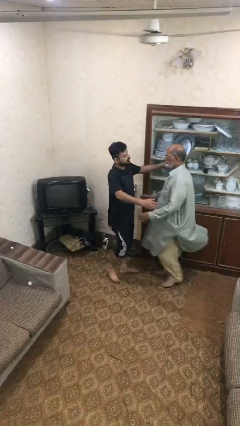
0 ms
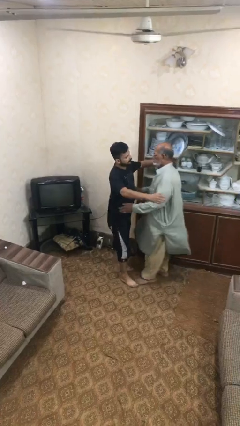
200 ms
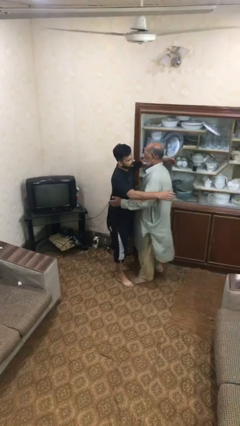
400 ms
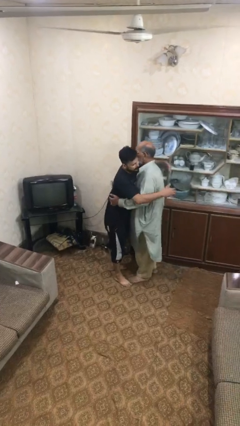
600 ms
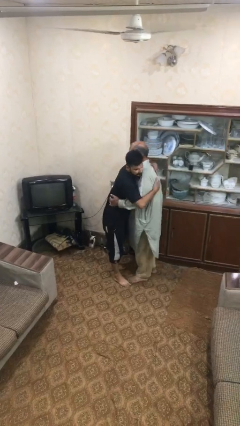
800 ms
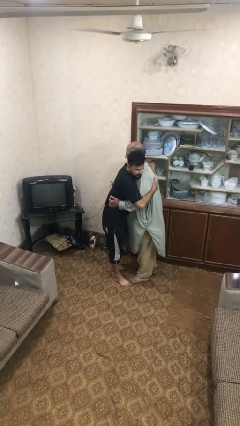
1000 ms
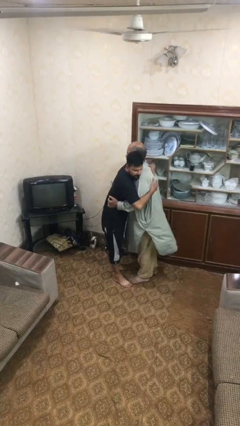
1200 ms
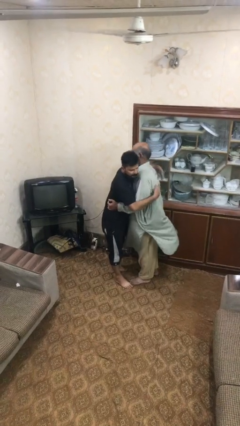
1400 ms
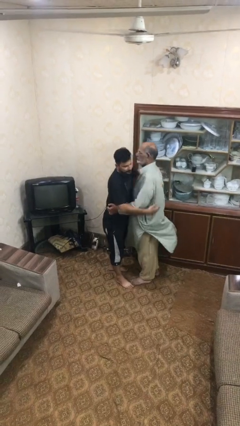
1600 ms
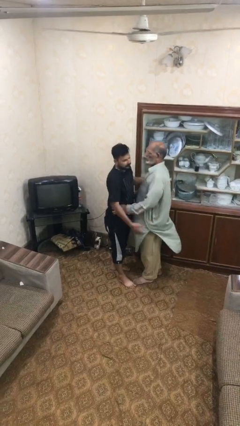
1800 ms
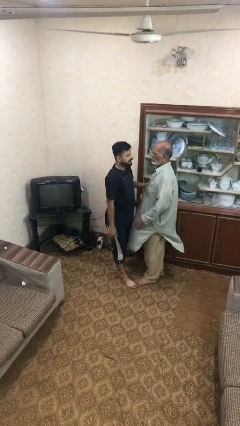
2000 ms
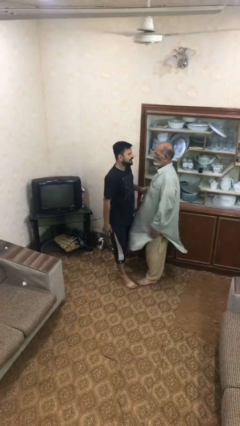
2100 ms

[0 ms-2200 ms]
person embraces person

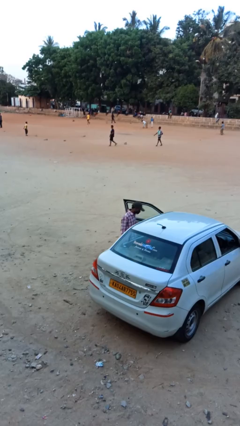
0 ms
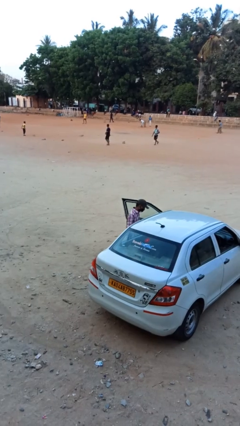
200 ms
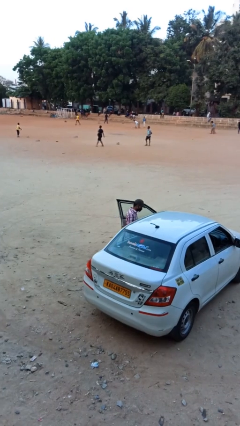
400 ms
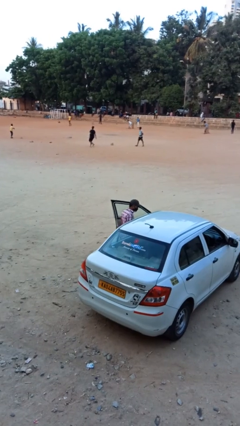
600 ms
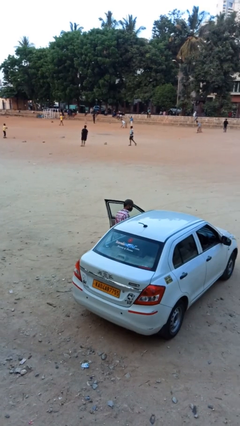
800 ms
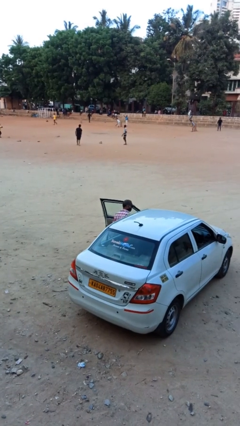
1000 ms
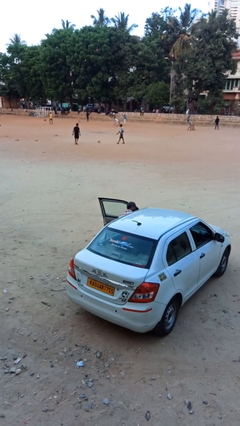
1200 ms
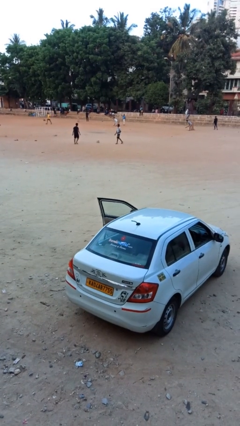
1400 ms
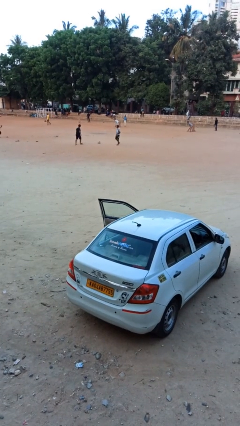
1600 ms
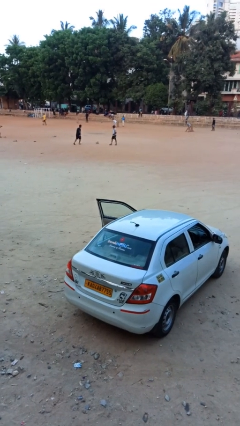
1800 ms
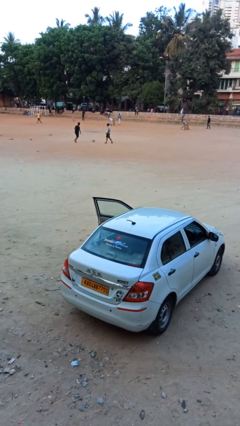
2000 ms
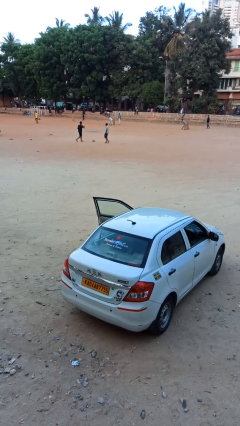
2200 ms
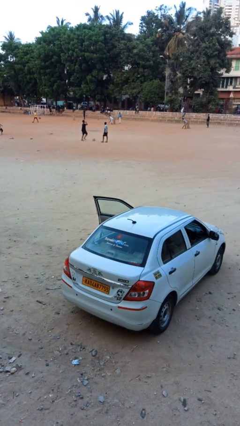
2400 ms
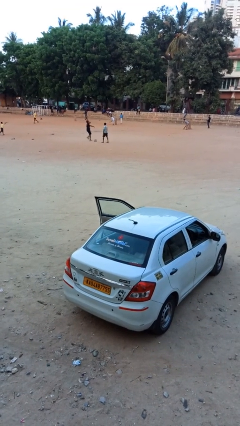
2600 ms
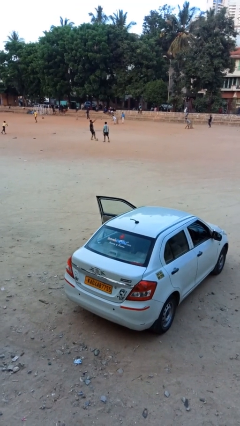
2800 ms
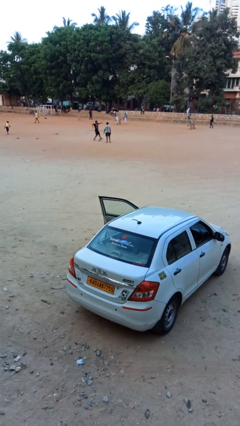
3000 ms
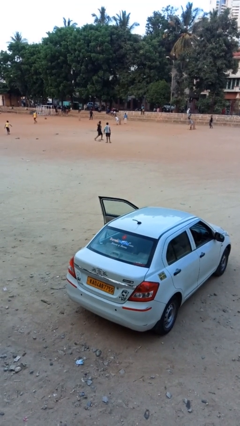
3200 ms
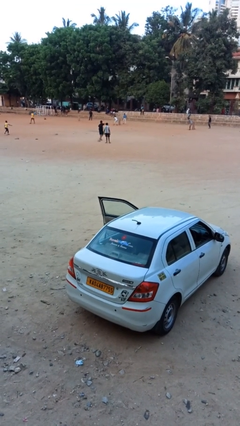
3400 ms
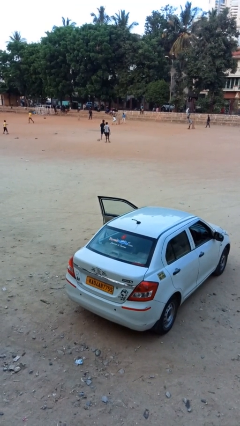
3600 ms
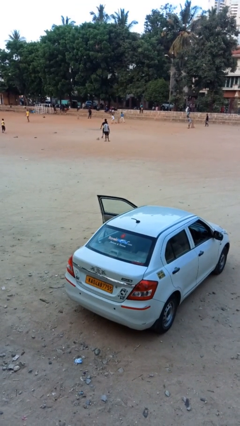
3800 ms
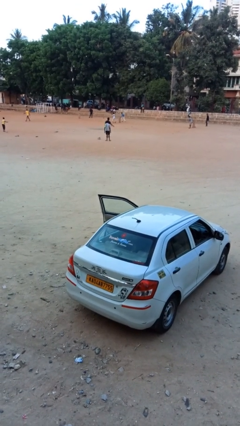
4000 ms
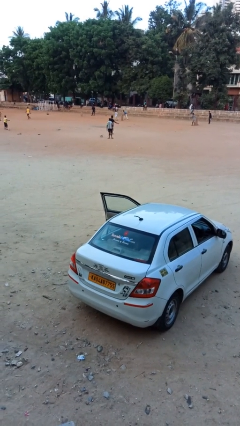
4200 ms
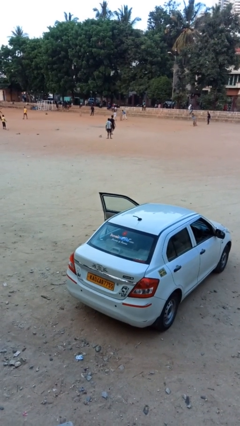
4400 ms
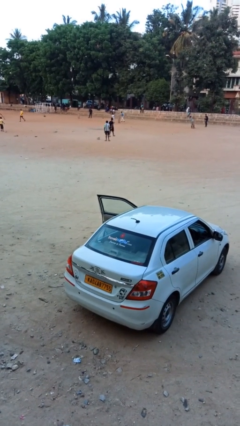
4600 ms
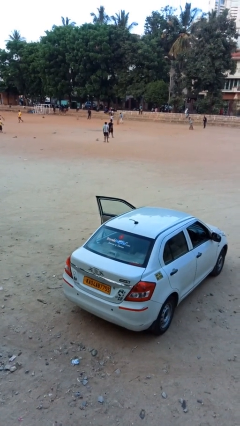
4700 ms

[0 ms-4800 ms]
person enters car

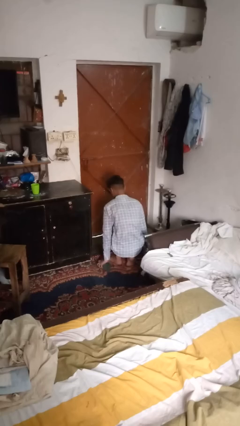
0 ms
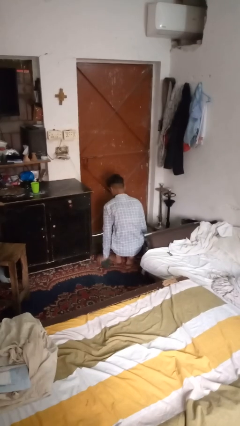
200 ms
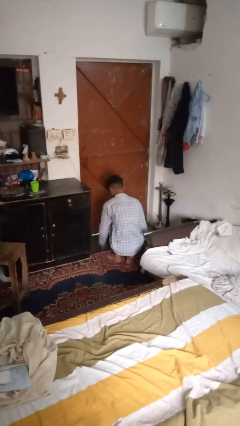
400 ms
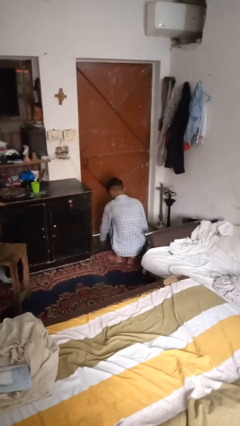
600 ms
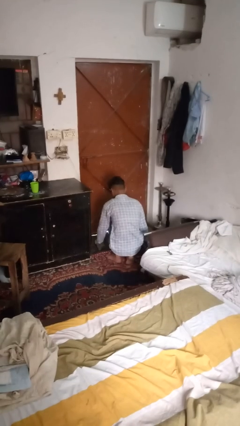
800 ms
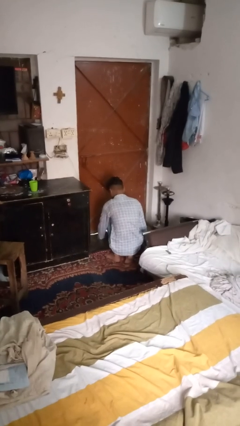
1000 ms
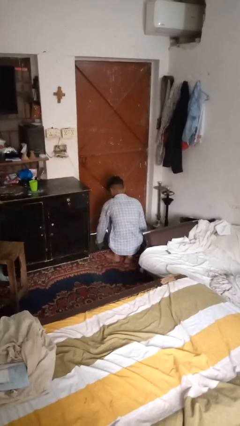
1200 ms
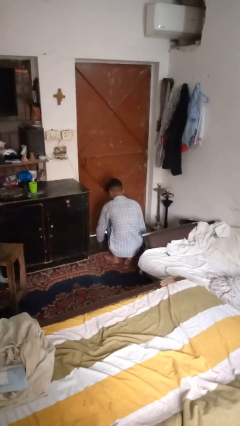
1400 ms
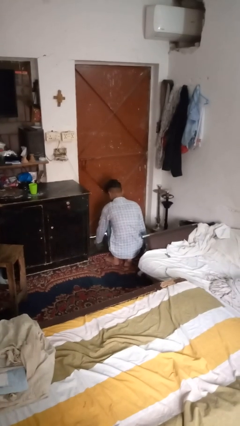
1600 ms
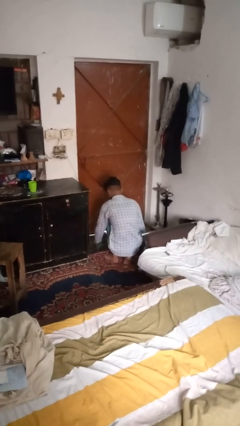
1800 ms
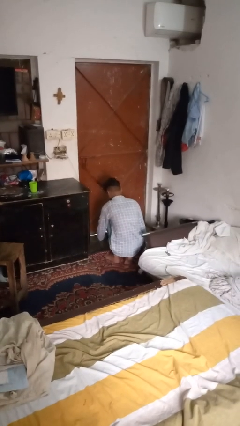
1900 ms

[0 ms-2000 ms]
person mops

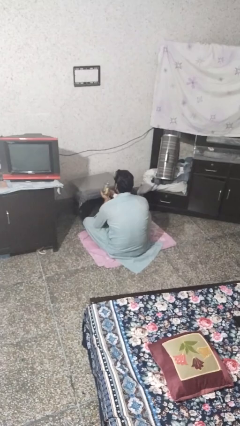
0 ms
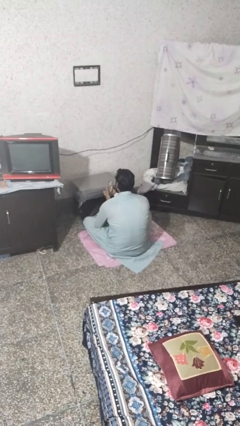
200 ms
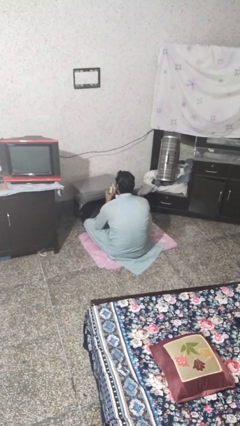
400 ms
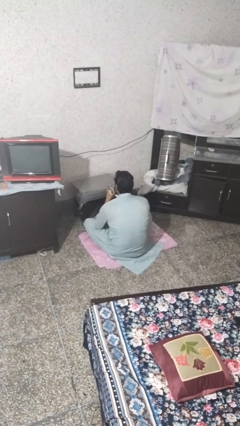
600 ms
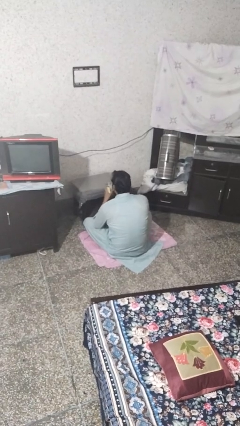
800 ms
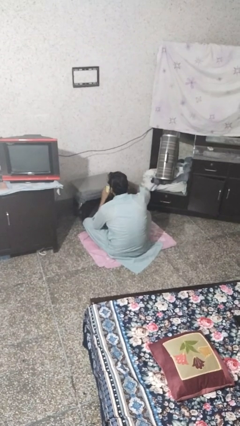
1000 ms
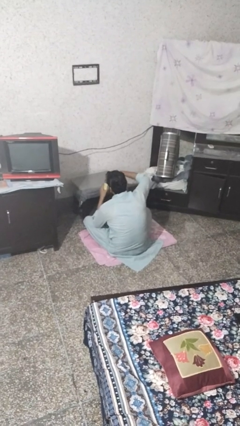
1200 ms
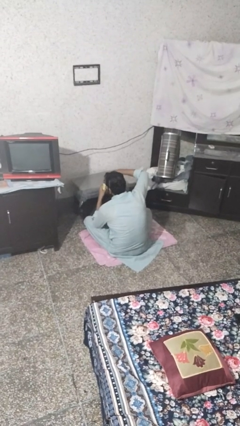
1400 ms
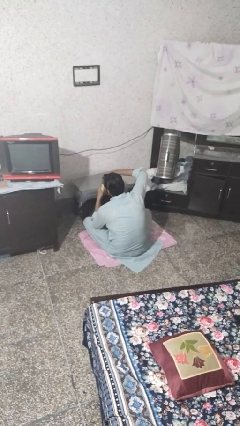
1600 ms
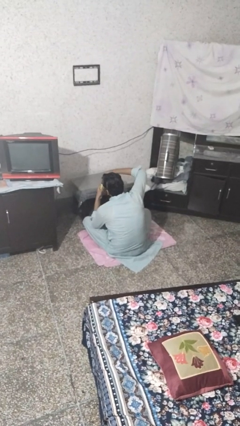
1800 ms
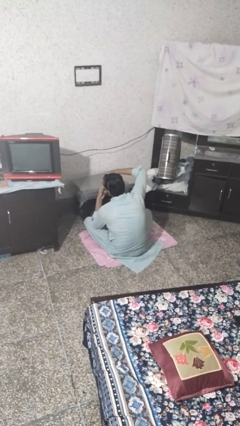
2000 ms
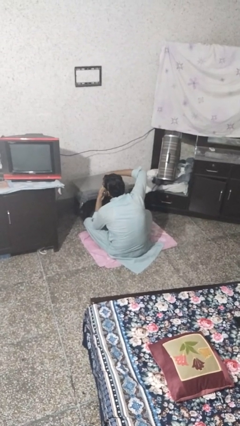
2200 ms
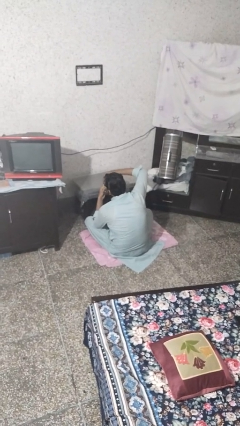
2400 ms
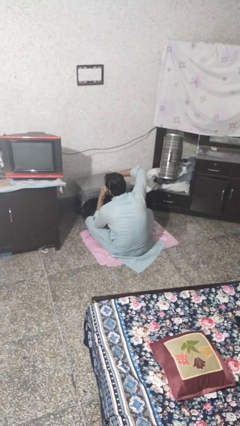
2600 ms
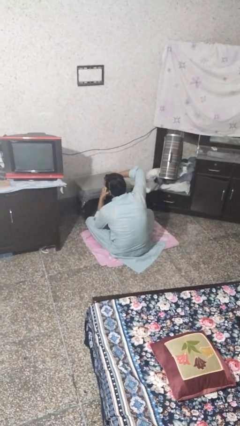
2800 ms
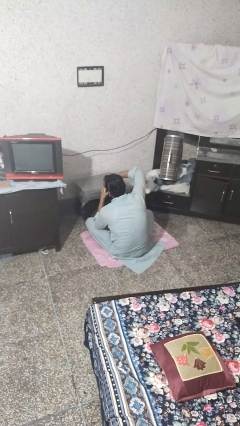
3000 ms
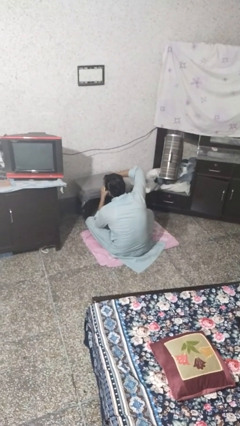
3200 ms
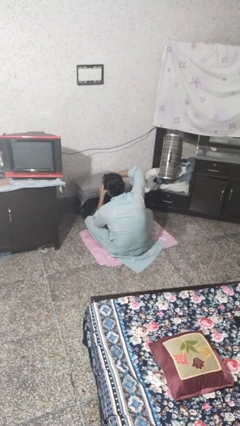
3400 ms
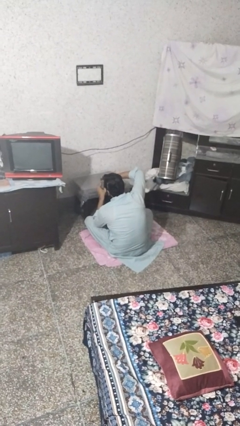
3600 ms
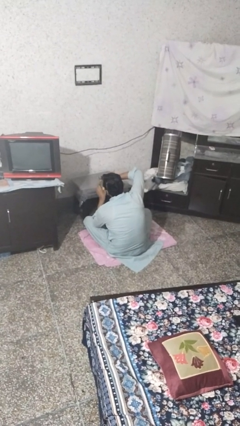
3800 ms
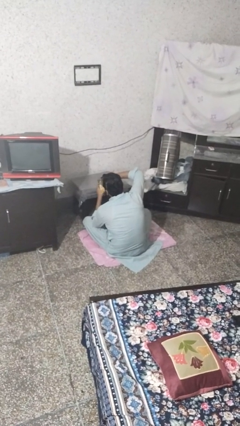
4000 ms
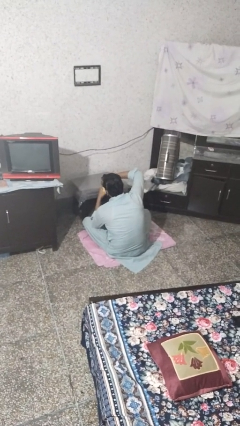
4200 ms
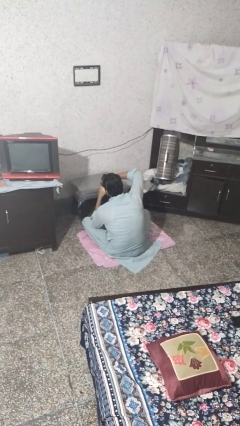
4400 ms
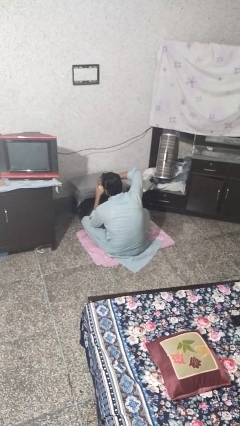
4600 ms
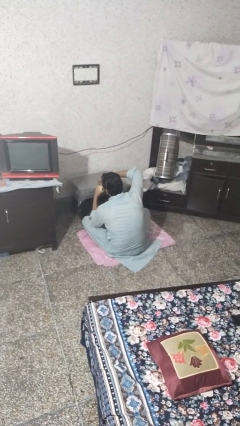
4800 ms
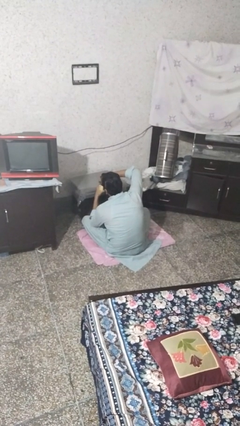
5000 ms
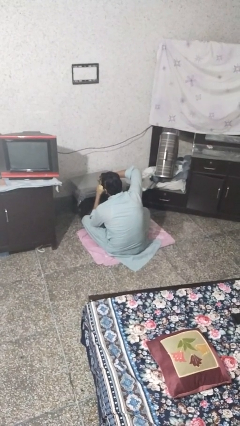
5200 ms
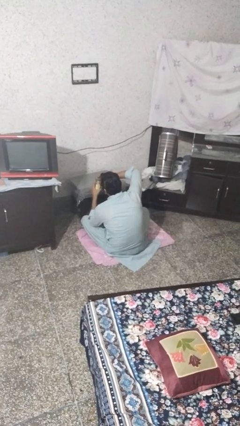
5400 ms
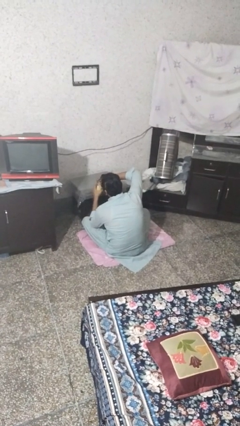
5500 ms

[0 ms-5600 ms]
person closes jar

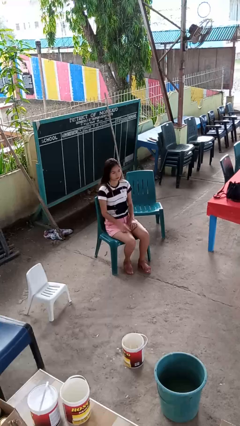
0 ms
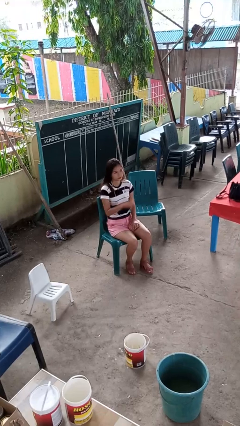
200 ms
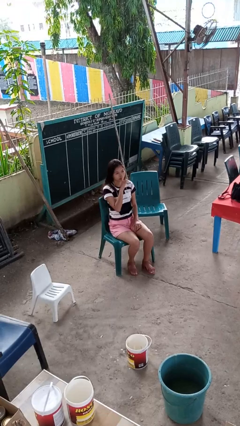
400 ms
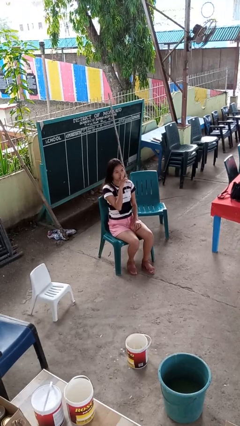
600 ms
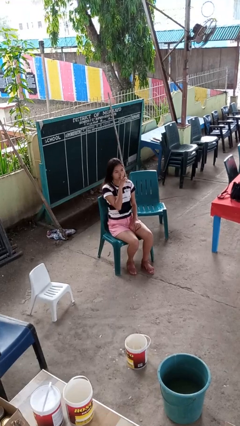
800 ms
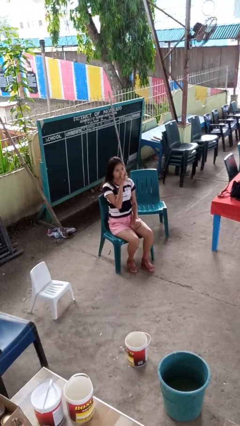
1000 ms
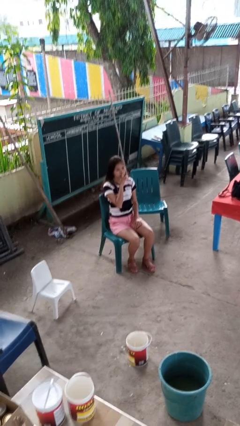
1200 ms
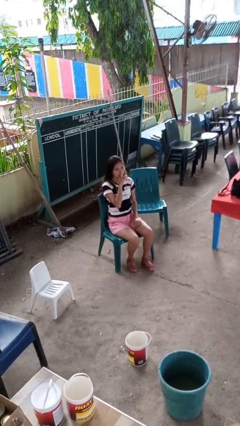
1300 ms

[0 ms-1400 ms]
person gestures be quiet

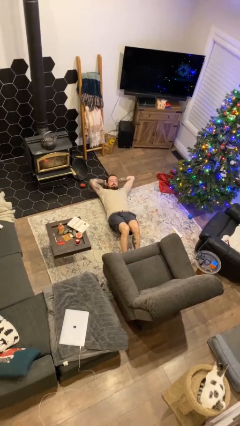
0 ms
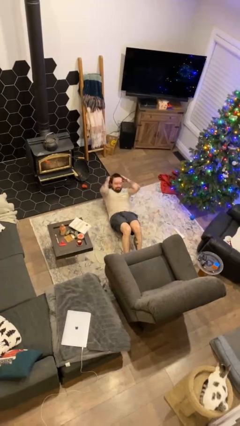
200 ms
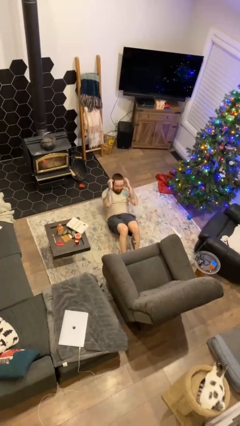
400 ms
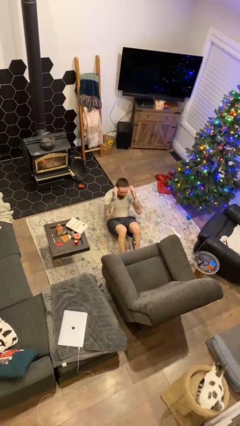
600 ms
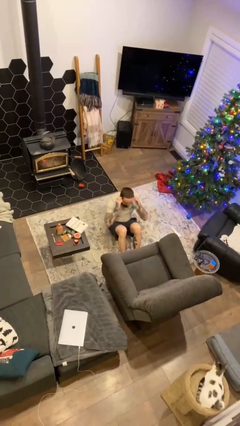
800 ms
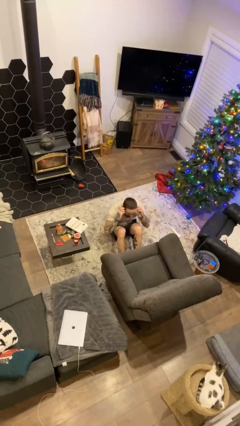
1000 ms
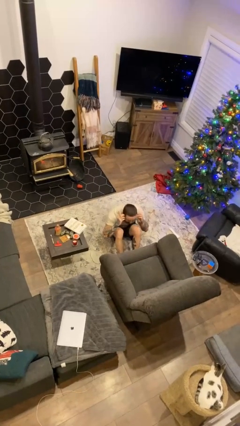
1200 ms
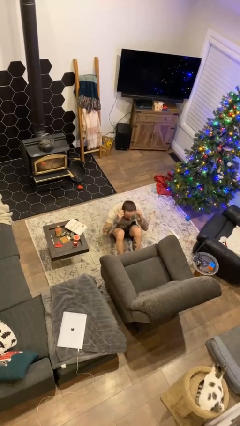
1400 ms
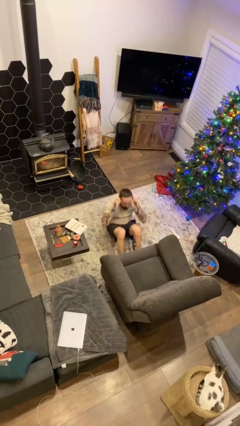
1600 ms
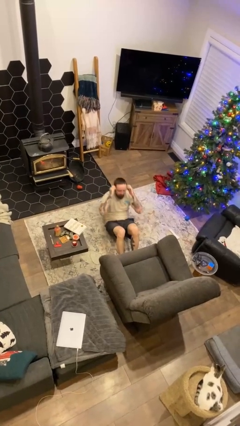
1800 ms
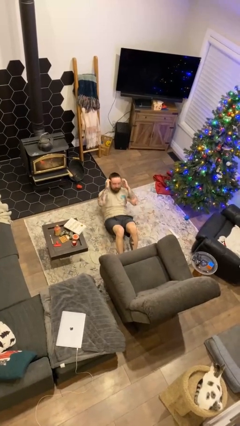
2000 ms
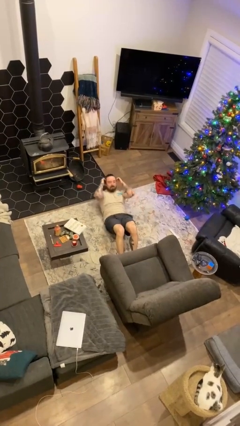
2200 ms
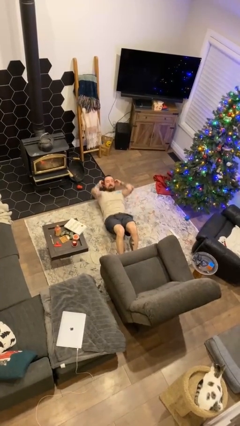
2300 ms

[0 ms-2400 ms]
person exercises with situp
